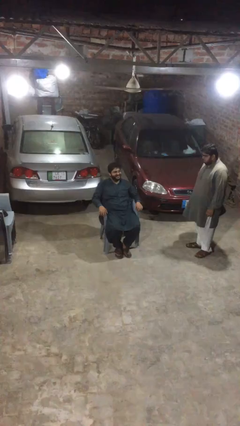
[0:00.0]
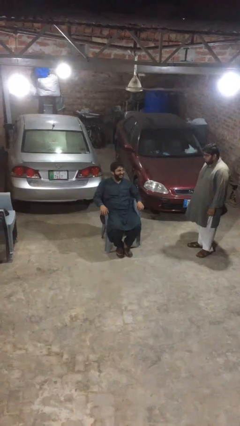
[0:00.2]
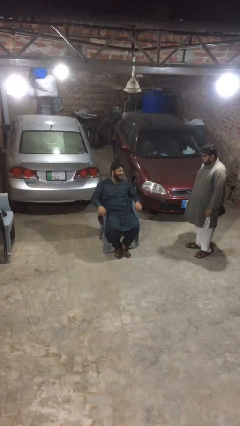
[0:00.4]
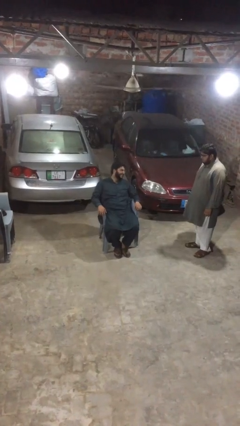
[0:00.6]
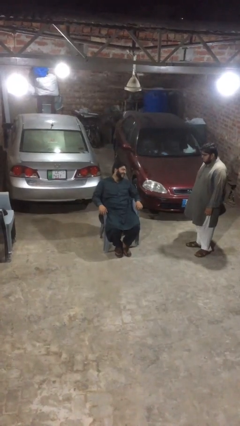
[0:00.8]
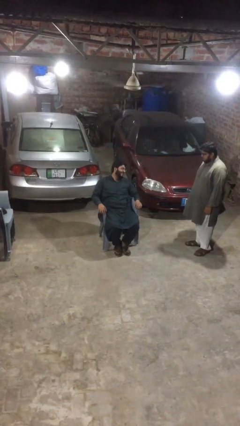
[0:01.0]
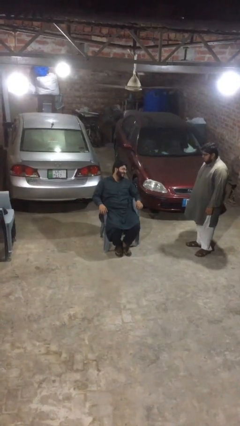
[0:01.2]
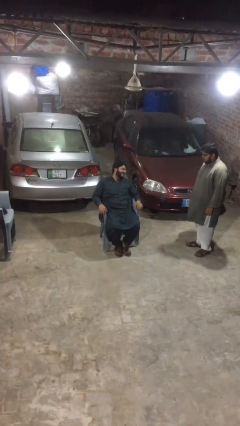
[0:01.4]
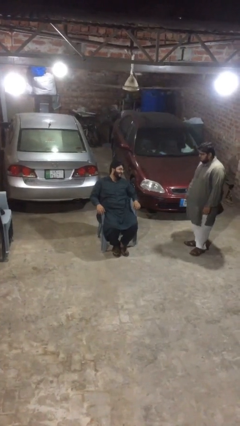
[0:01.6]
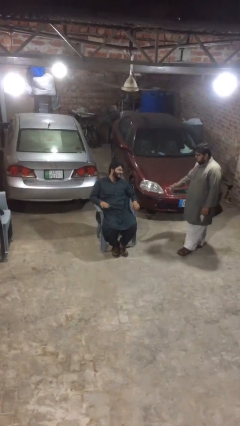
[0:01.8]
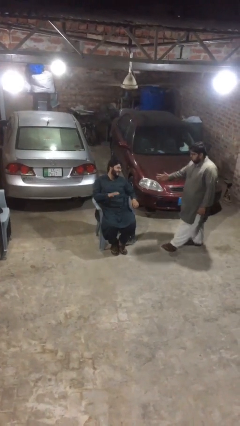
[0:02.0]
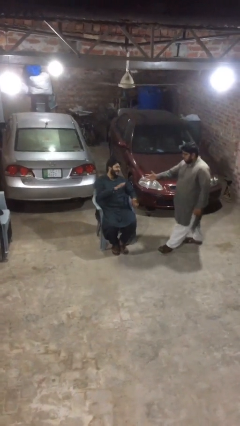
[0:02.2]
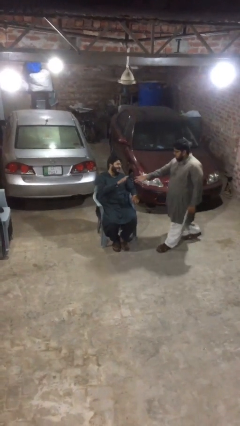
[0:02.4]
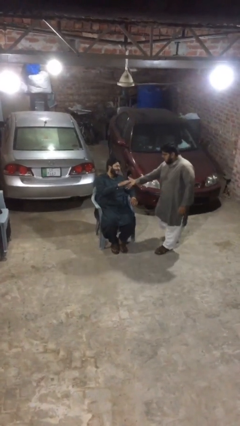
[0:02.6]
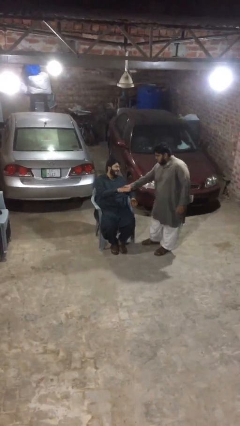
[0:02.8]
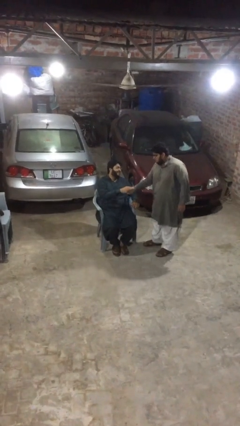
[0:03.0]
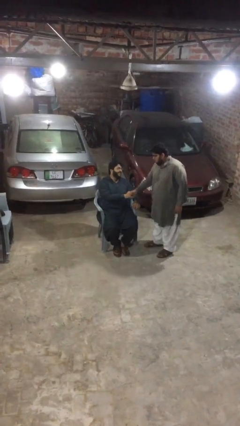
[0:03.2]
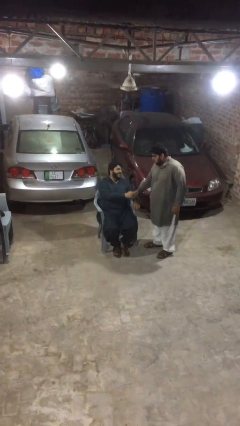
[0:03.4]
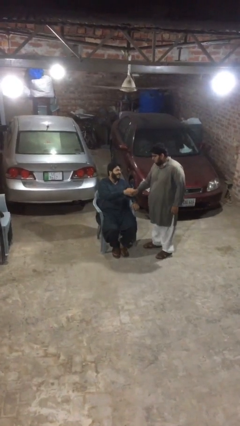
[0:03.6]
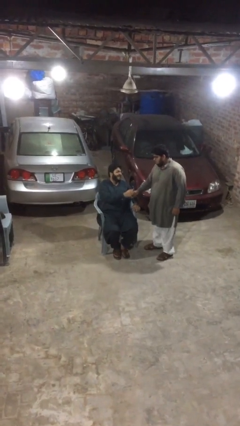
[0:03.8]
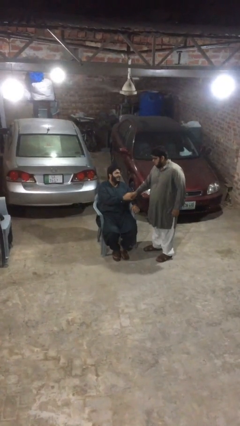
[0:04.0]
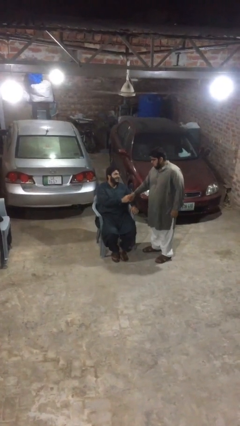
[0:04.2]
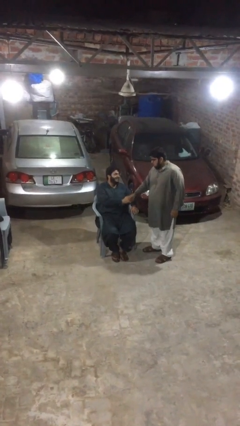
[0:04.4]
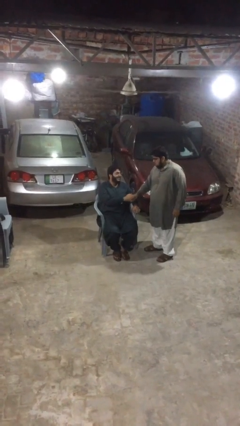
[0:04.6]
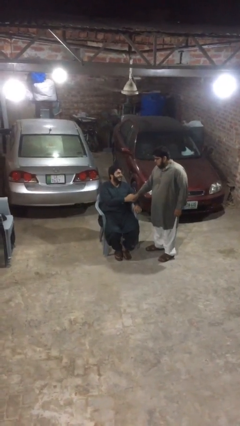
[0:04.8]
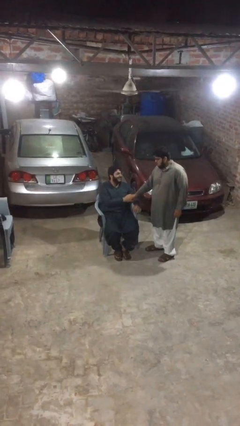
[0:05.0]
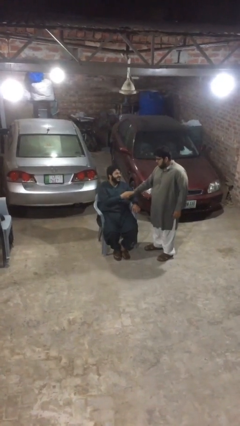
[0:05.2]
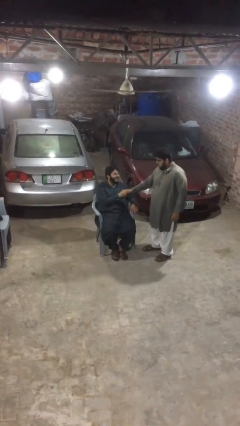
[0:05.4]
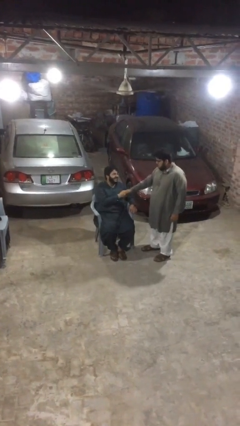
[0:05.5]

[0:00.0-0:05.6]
person shakes hand

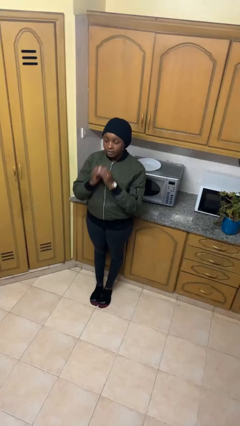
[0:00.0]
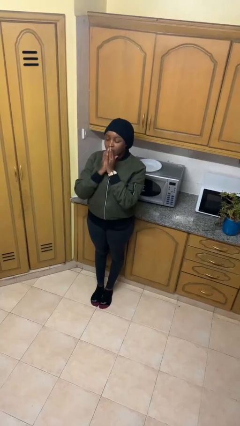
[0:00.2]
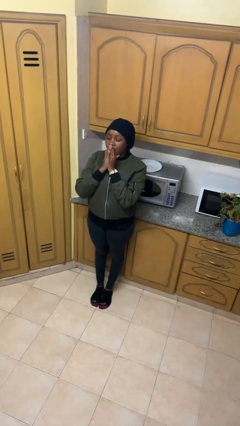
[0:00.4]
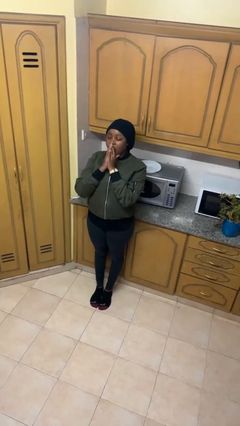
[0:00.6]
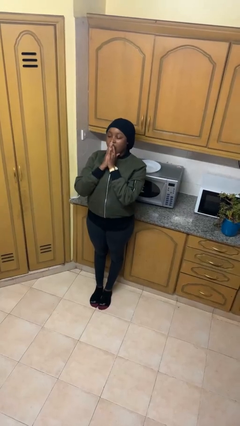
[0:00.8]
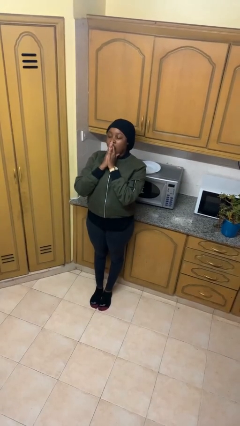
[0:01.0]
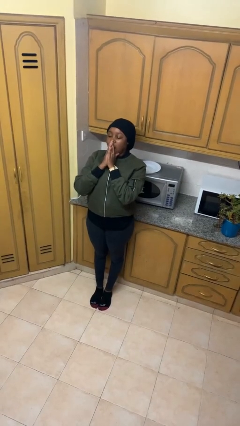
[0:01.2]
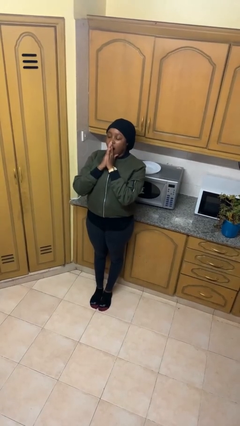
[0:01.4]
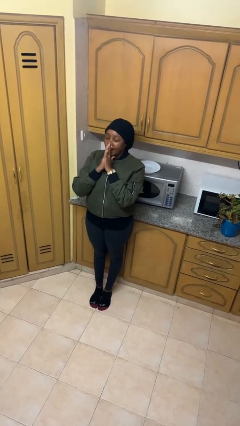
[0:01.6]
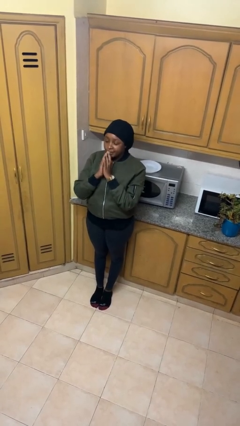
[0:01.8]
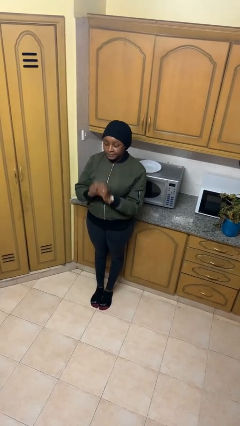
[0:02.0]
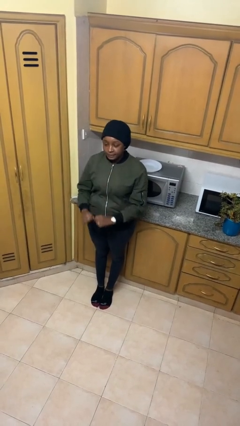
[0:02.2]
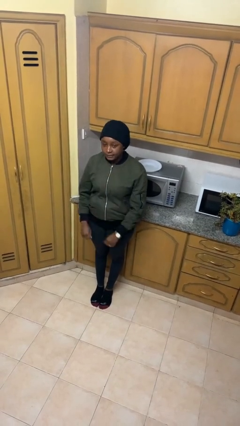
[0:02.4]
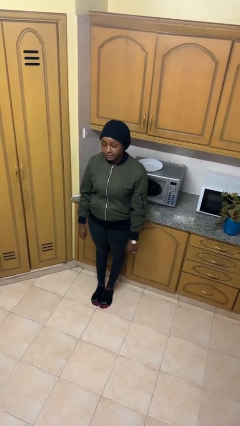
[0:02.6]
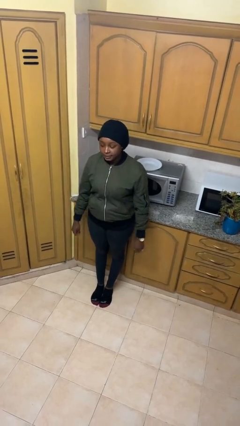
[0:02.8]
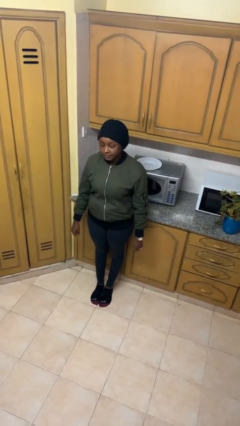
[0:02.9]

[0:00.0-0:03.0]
person yawns

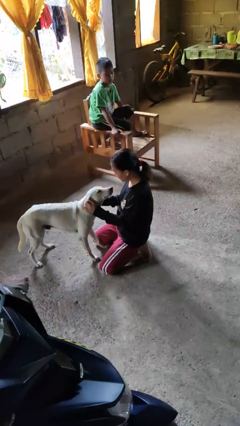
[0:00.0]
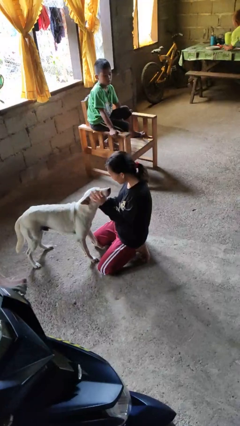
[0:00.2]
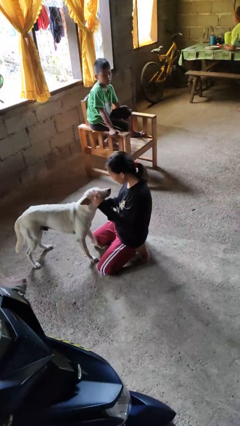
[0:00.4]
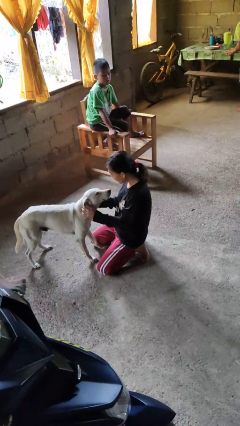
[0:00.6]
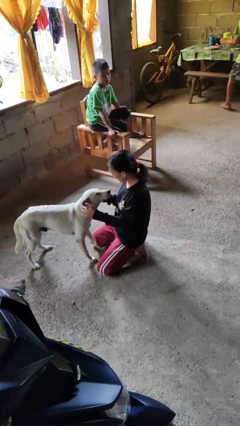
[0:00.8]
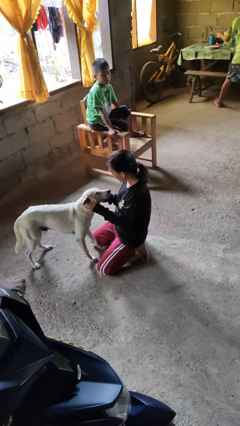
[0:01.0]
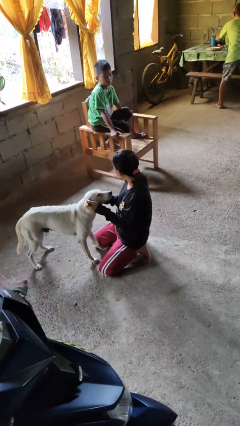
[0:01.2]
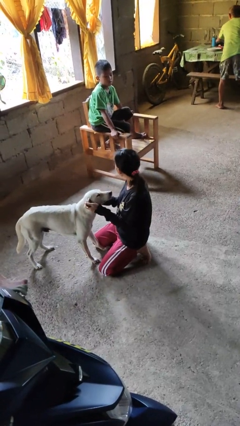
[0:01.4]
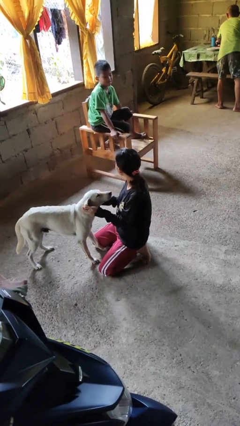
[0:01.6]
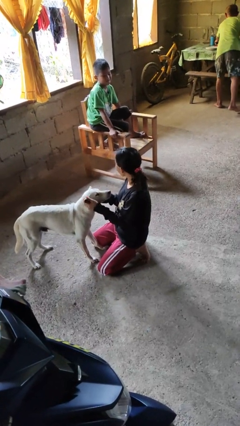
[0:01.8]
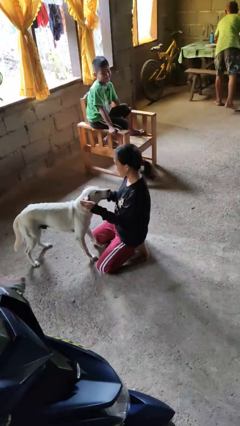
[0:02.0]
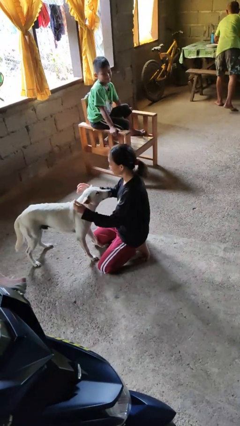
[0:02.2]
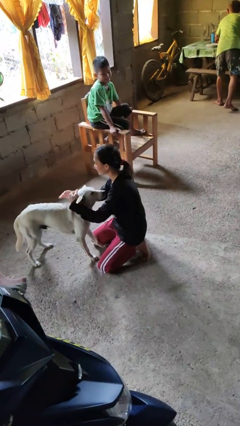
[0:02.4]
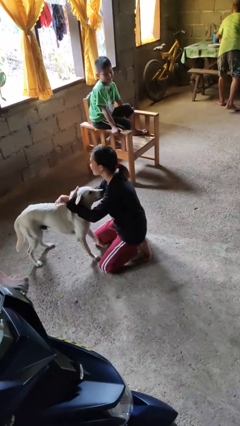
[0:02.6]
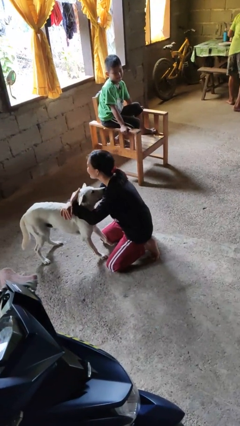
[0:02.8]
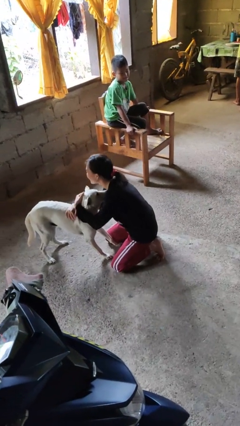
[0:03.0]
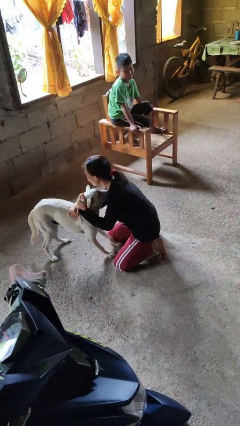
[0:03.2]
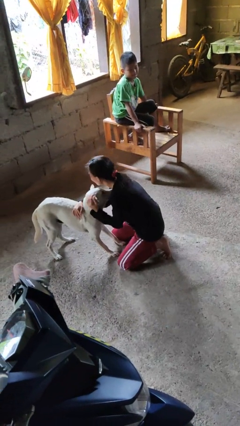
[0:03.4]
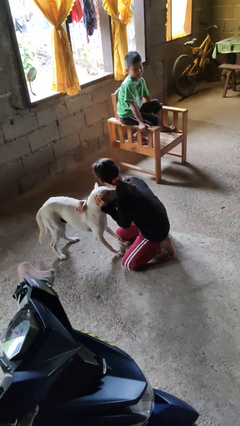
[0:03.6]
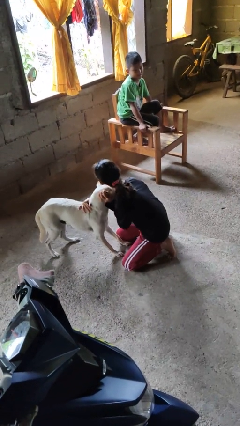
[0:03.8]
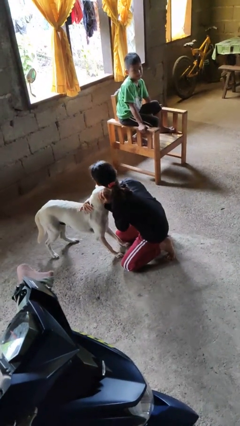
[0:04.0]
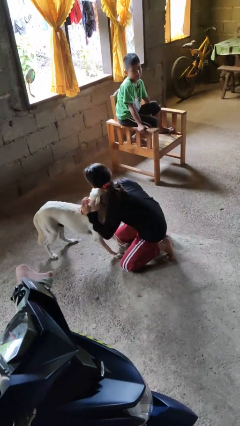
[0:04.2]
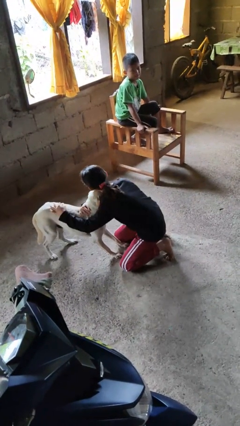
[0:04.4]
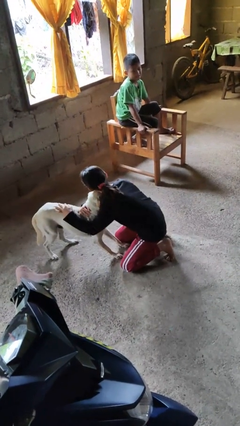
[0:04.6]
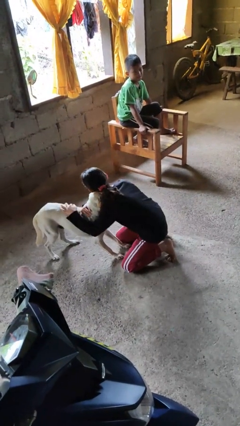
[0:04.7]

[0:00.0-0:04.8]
person hugs dog

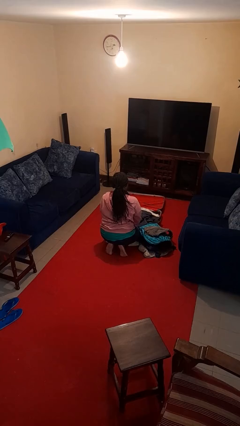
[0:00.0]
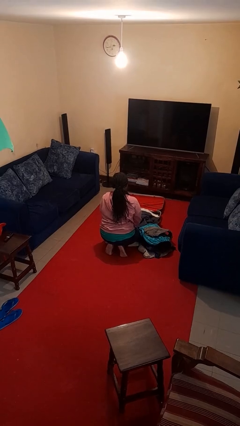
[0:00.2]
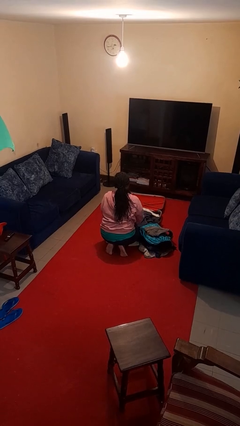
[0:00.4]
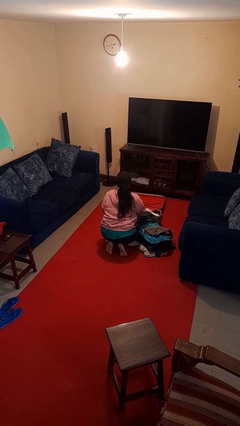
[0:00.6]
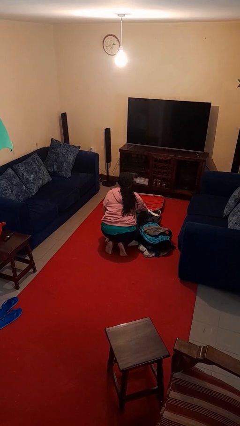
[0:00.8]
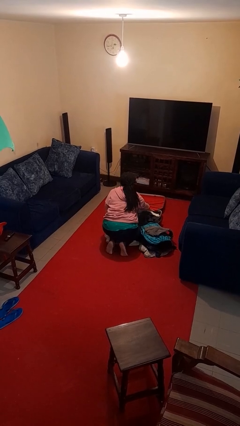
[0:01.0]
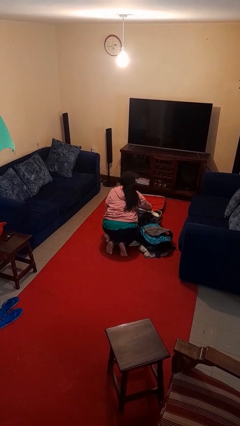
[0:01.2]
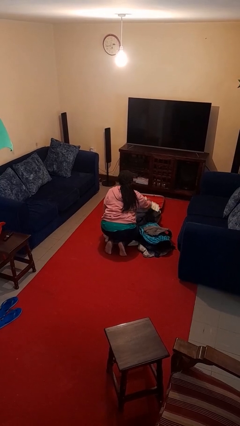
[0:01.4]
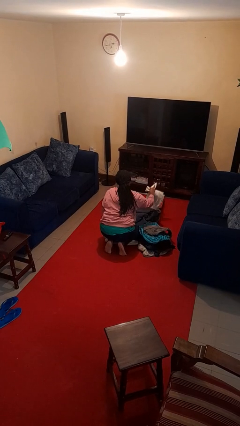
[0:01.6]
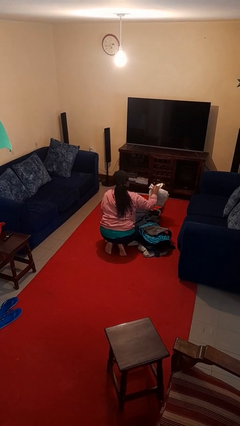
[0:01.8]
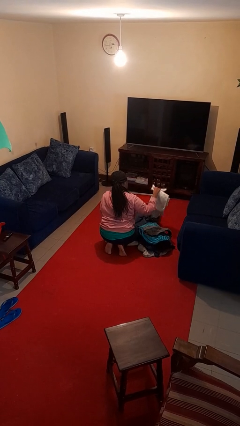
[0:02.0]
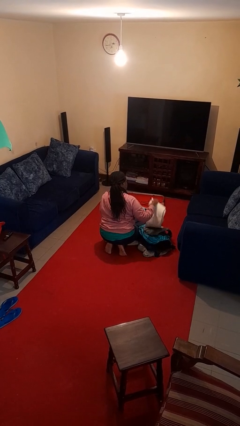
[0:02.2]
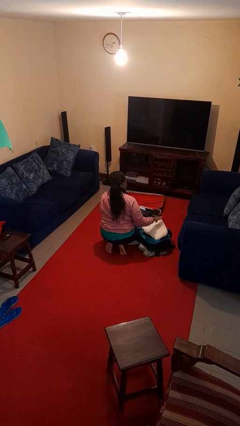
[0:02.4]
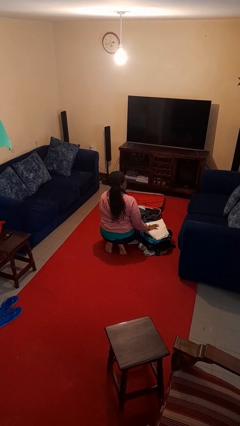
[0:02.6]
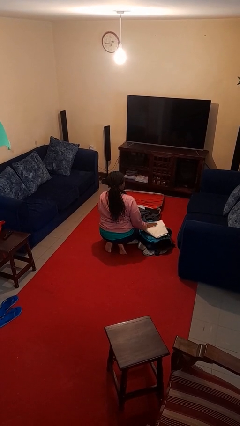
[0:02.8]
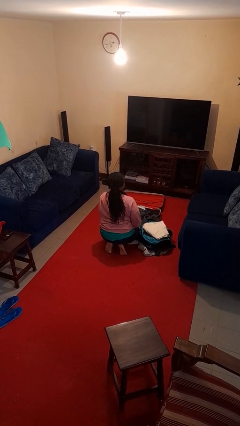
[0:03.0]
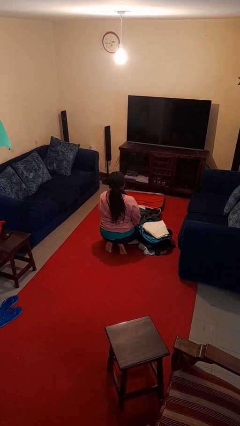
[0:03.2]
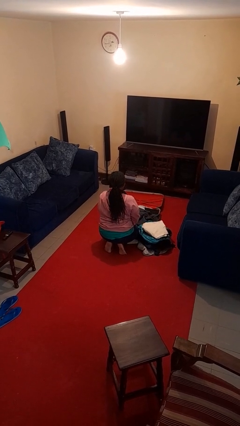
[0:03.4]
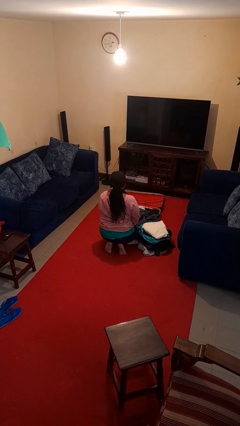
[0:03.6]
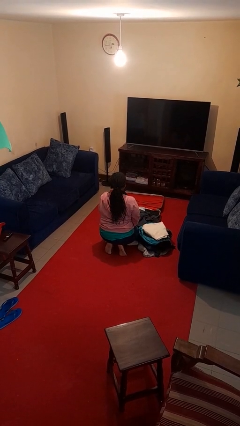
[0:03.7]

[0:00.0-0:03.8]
person unloads clothes from suitcase

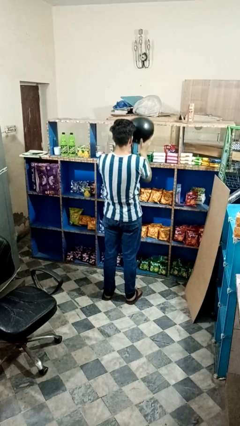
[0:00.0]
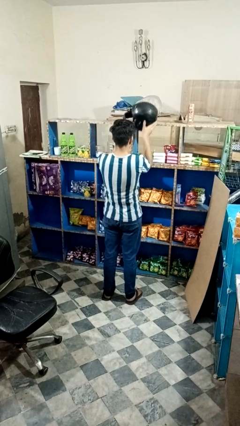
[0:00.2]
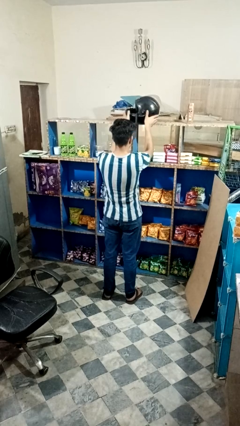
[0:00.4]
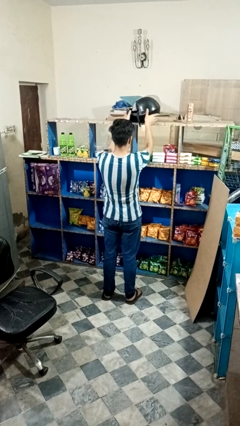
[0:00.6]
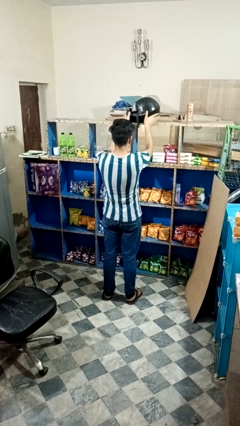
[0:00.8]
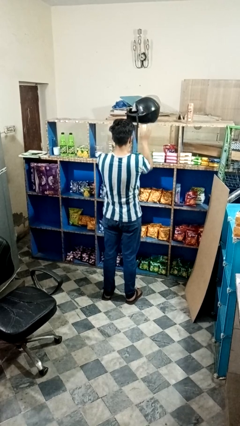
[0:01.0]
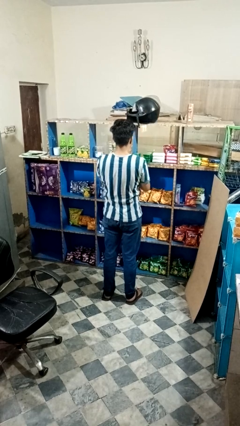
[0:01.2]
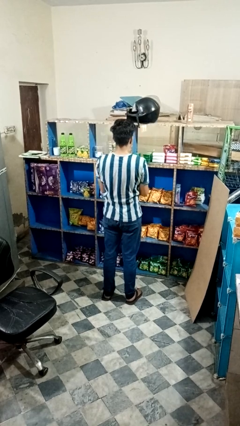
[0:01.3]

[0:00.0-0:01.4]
person puts down object on countertop
